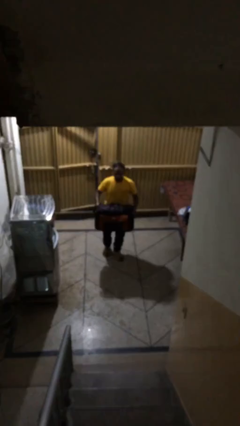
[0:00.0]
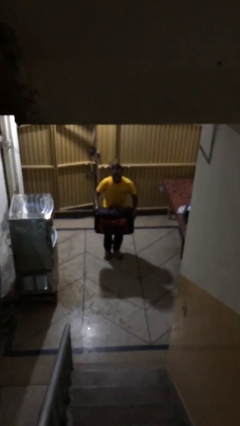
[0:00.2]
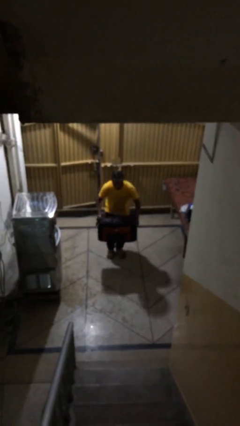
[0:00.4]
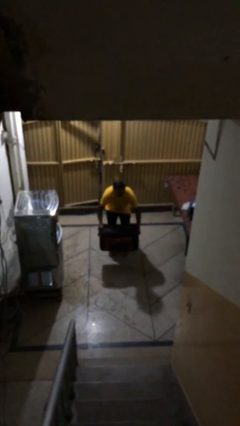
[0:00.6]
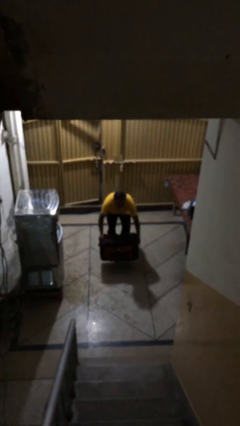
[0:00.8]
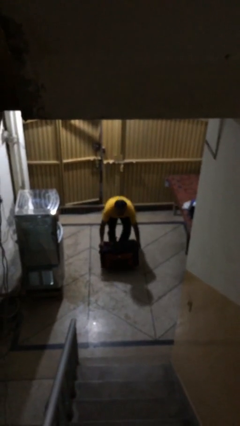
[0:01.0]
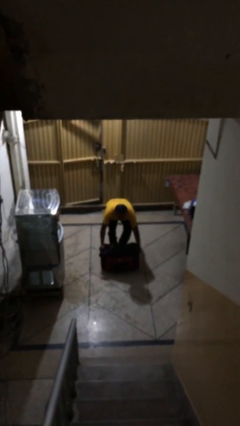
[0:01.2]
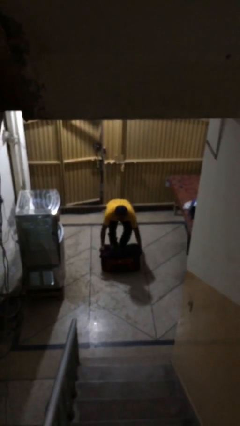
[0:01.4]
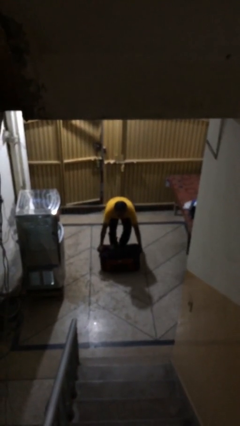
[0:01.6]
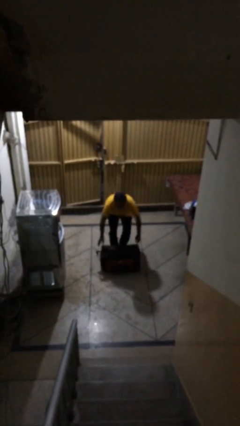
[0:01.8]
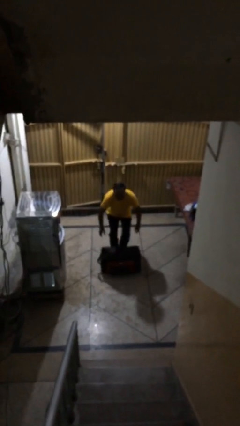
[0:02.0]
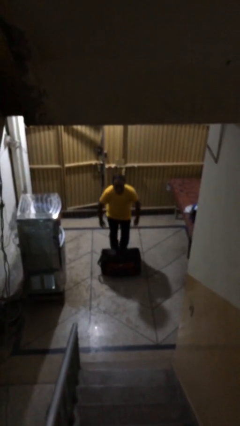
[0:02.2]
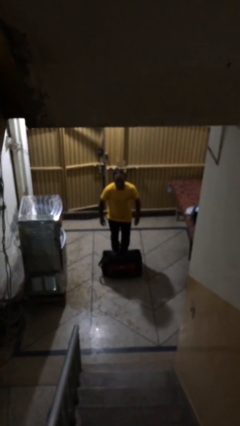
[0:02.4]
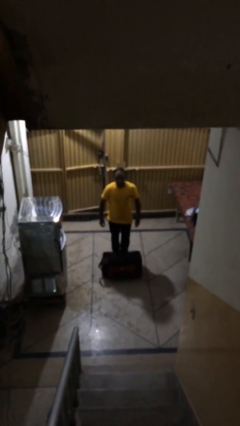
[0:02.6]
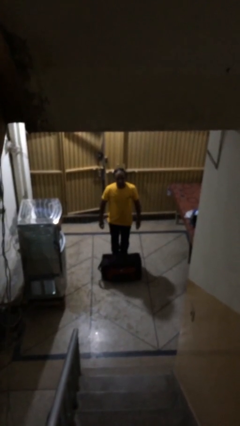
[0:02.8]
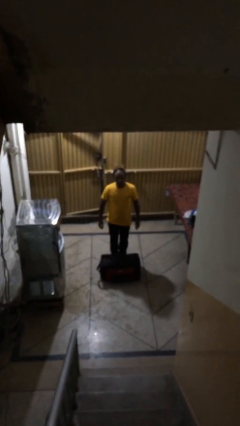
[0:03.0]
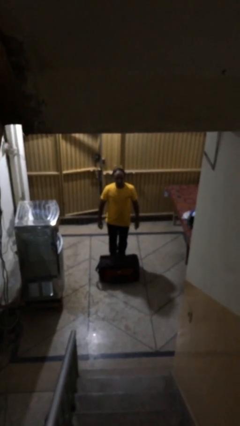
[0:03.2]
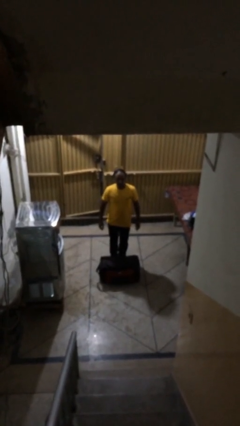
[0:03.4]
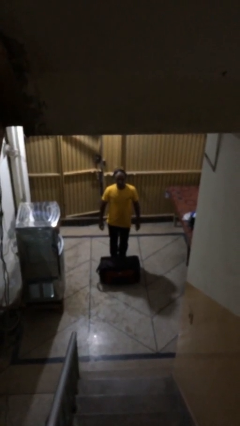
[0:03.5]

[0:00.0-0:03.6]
person puts down object on floor

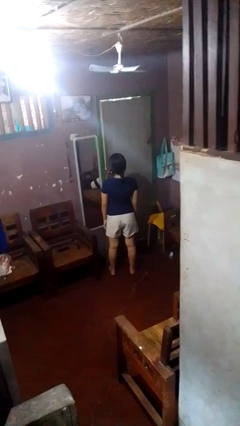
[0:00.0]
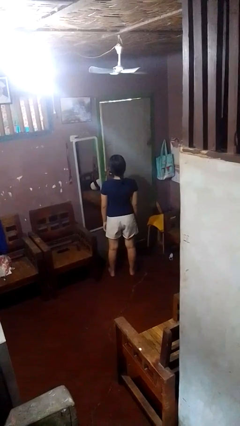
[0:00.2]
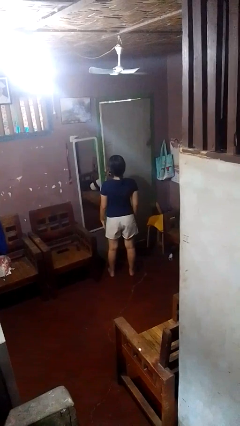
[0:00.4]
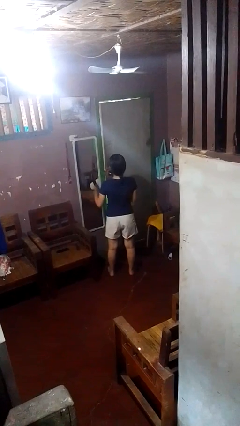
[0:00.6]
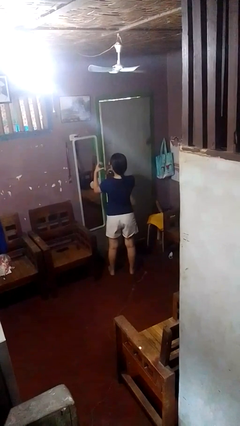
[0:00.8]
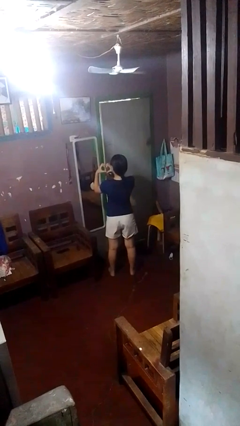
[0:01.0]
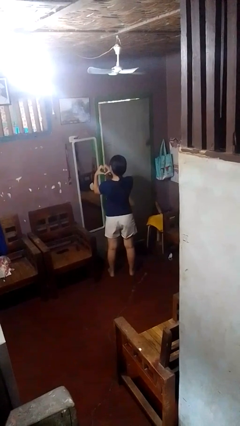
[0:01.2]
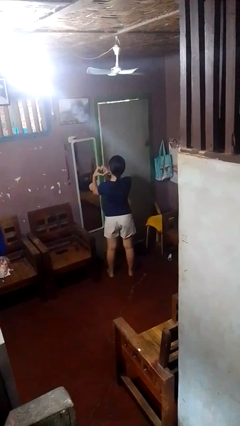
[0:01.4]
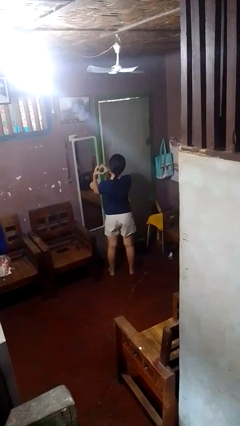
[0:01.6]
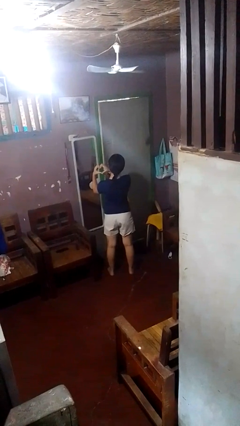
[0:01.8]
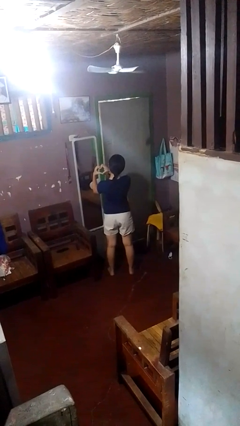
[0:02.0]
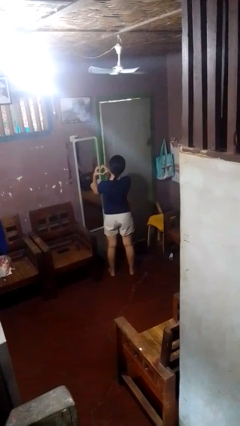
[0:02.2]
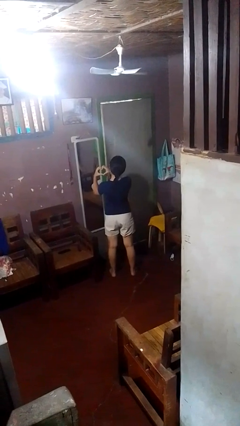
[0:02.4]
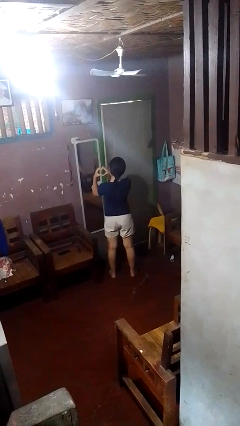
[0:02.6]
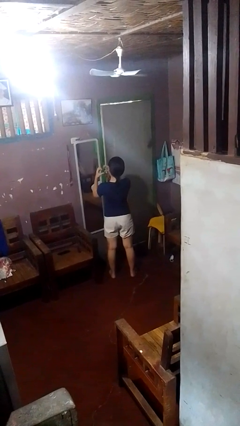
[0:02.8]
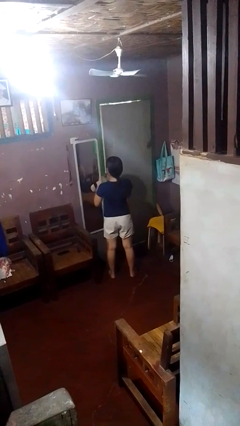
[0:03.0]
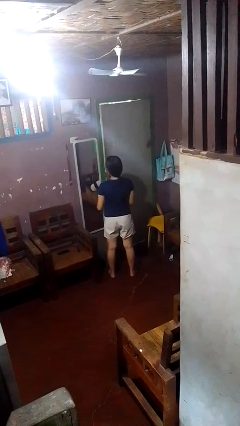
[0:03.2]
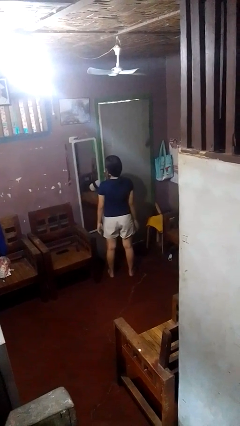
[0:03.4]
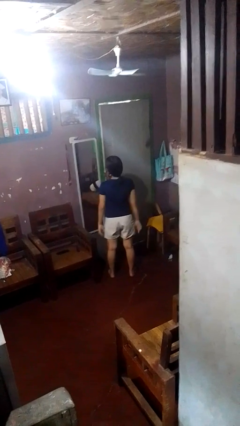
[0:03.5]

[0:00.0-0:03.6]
person gestures heart

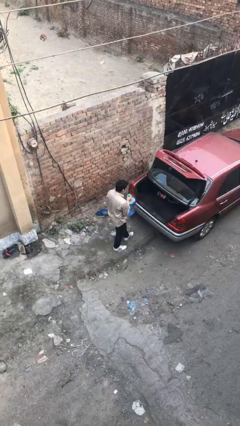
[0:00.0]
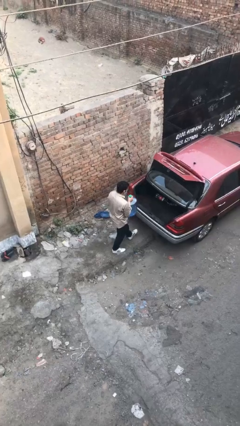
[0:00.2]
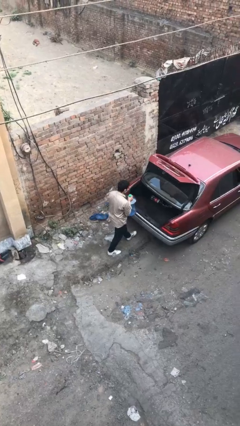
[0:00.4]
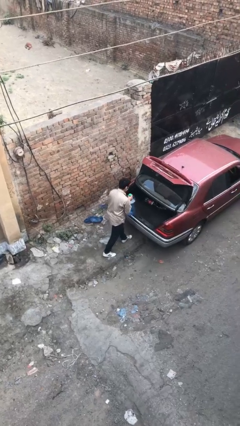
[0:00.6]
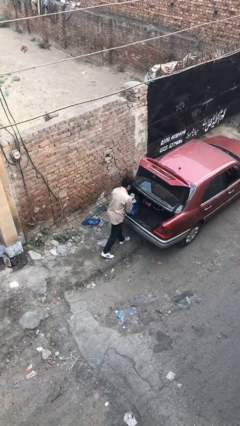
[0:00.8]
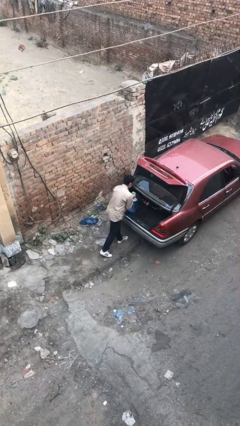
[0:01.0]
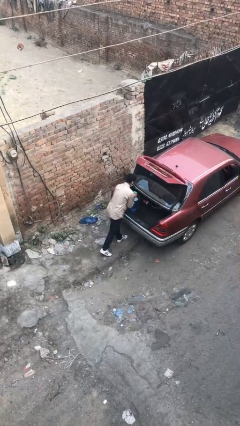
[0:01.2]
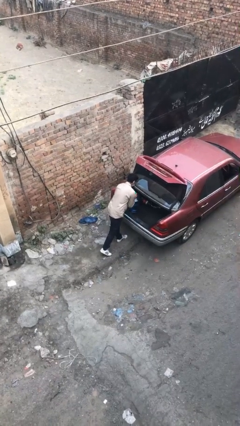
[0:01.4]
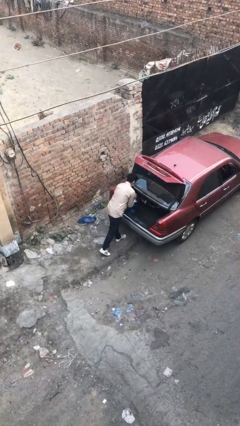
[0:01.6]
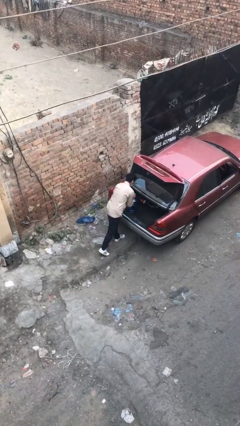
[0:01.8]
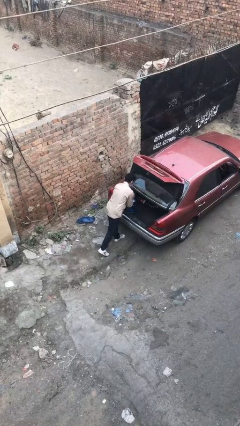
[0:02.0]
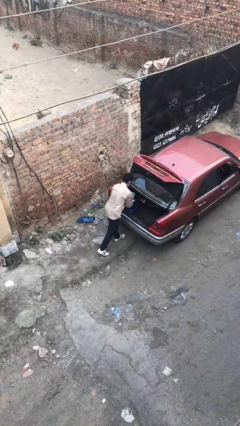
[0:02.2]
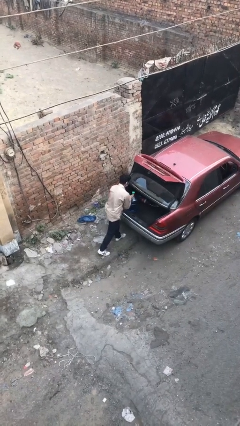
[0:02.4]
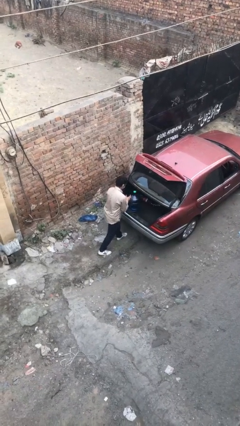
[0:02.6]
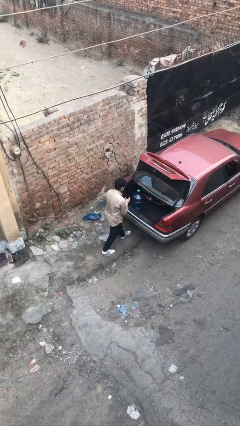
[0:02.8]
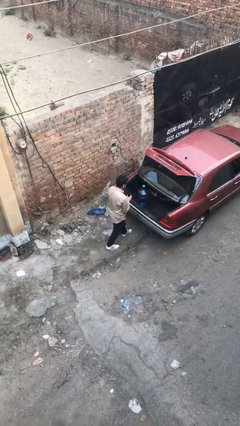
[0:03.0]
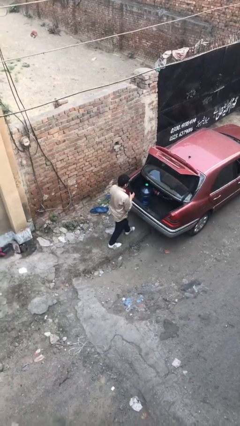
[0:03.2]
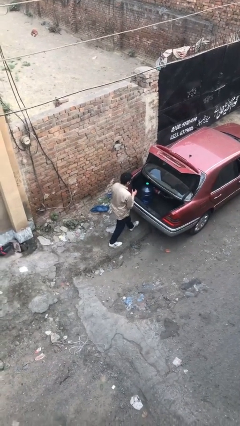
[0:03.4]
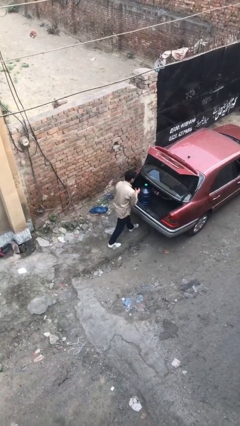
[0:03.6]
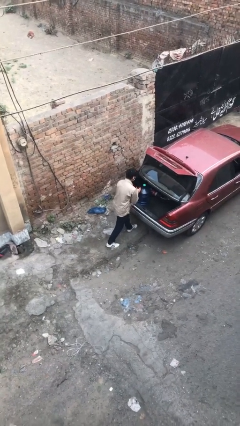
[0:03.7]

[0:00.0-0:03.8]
person loads car

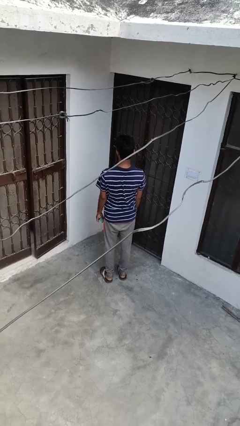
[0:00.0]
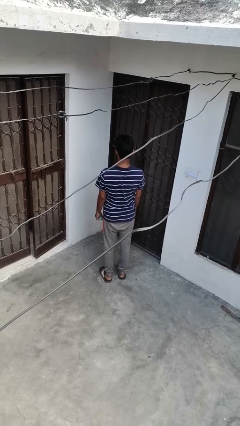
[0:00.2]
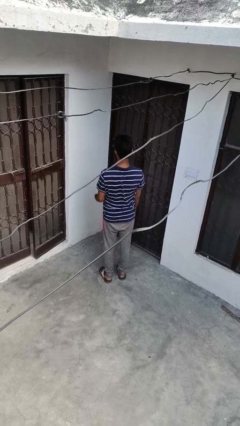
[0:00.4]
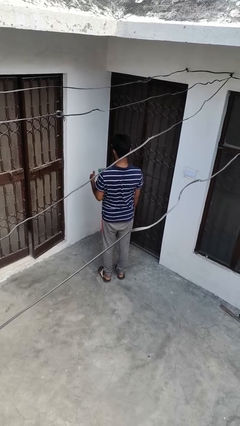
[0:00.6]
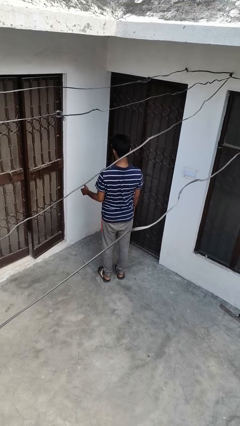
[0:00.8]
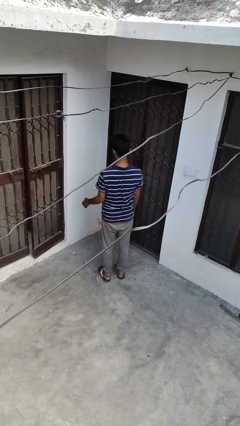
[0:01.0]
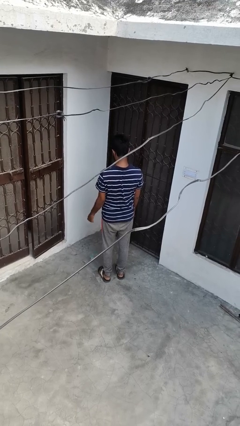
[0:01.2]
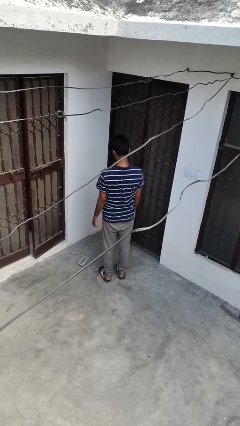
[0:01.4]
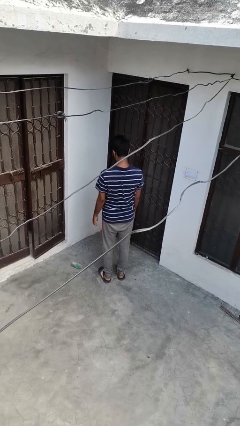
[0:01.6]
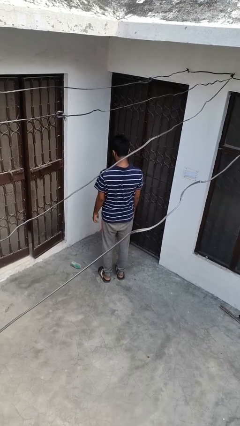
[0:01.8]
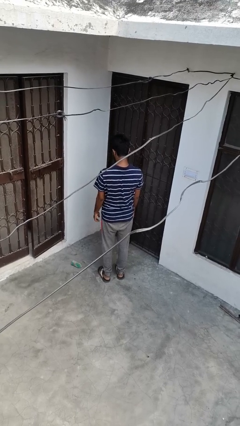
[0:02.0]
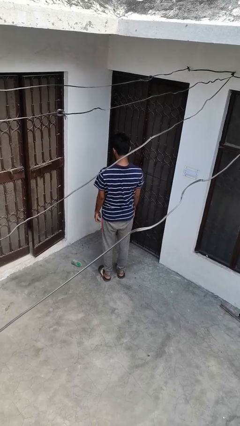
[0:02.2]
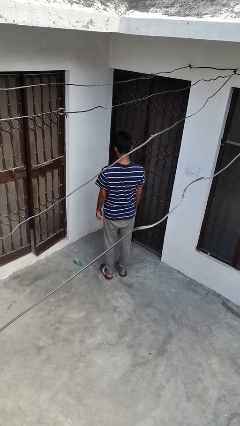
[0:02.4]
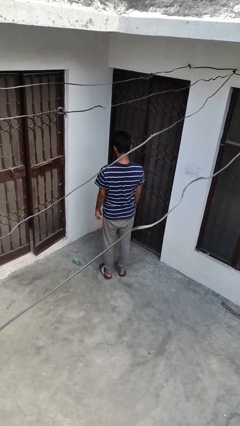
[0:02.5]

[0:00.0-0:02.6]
person throws object into air

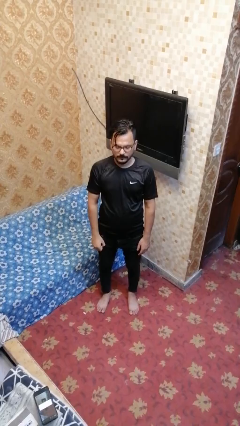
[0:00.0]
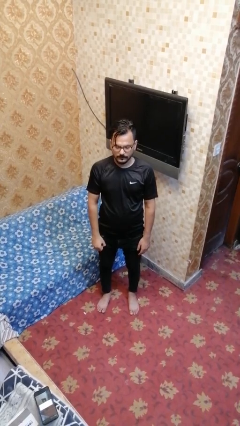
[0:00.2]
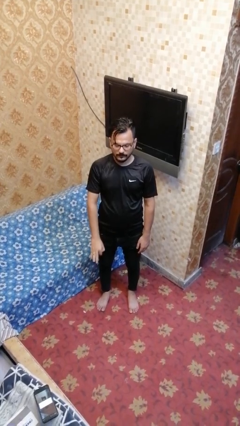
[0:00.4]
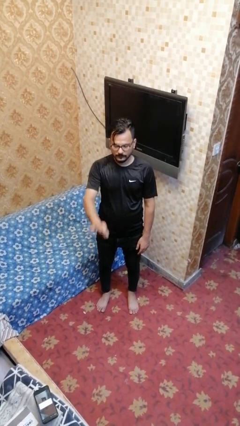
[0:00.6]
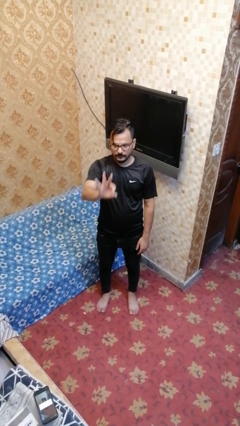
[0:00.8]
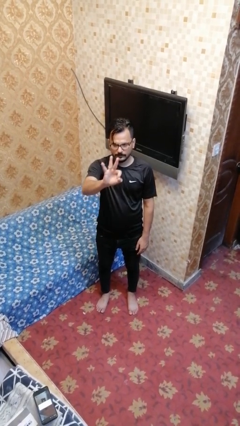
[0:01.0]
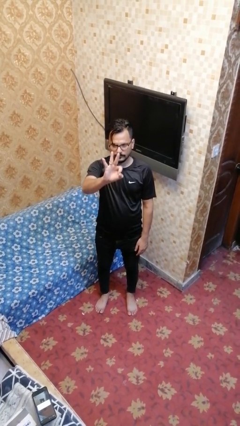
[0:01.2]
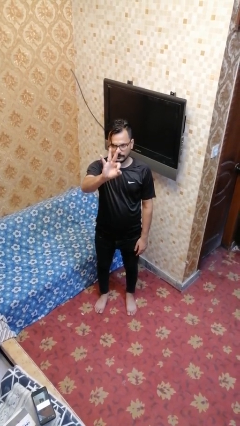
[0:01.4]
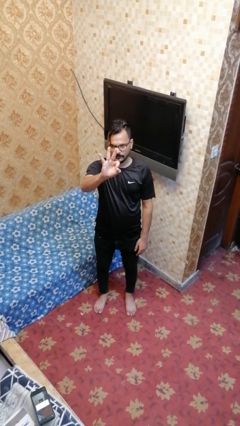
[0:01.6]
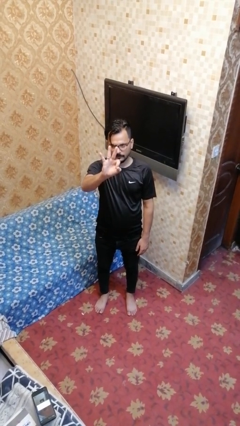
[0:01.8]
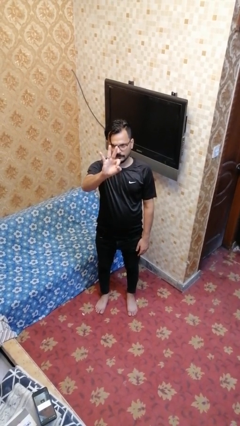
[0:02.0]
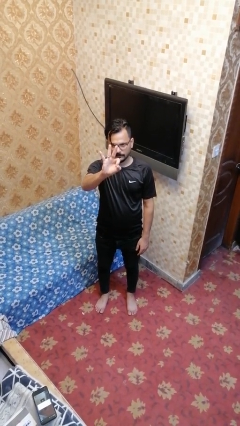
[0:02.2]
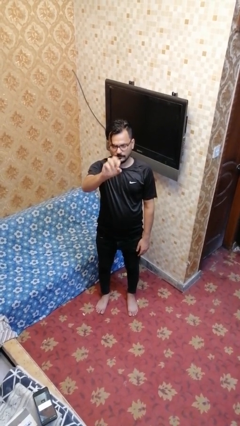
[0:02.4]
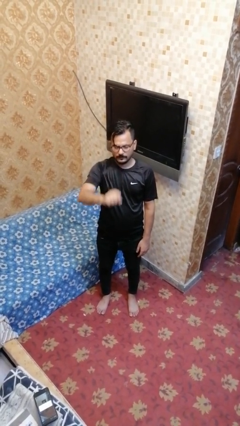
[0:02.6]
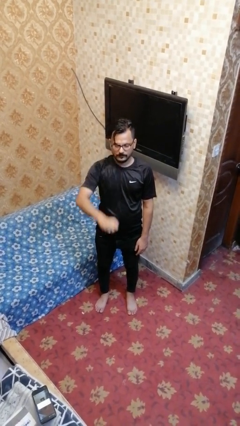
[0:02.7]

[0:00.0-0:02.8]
person gestures number three

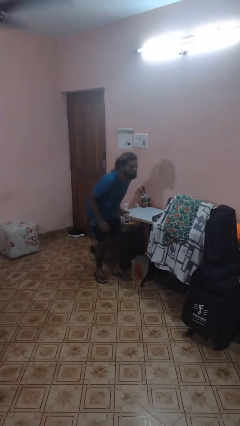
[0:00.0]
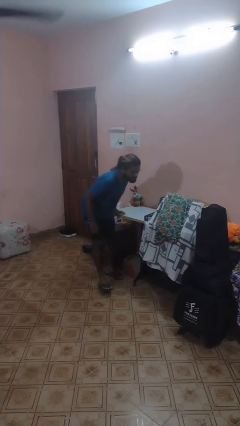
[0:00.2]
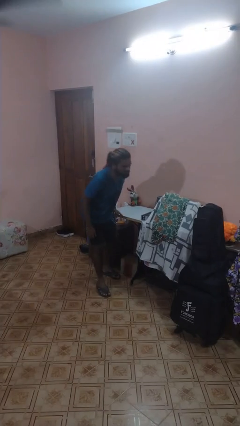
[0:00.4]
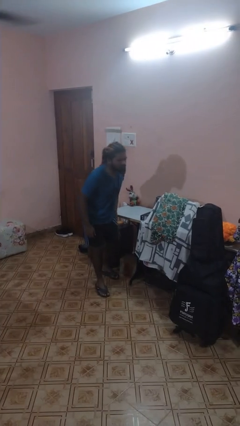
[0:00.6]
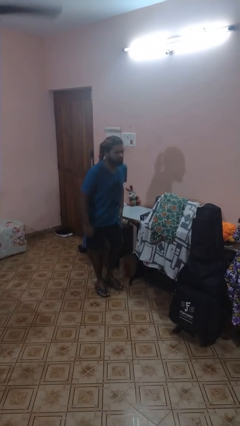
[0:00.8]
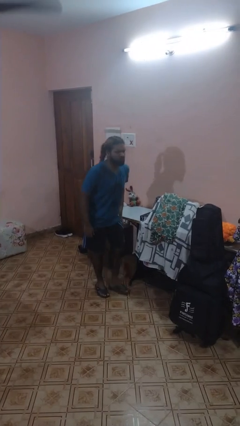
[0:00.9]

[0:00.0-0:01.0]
person bumps into table

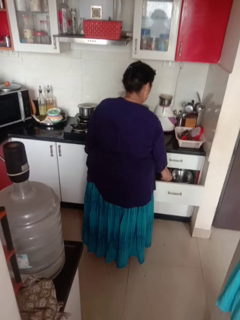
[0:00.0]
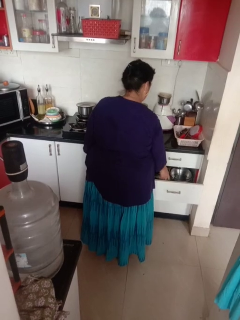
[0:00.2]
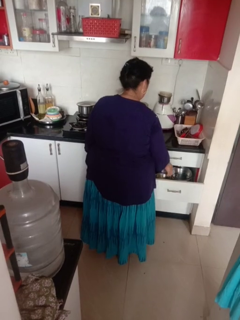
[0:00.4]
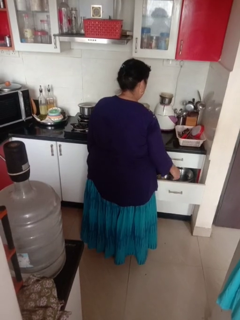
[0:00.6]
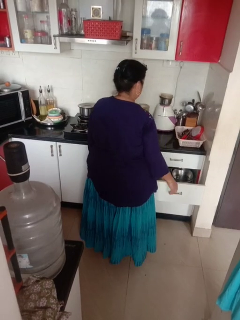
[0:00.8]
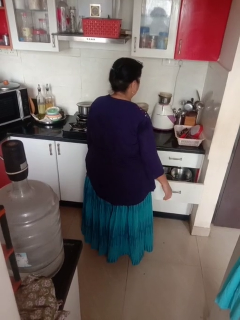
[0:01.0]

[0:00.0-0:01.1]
person puts object into kitchen drawer
